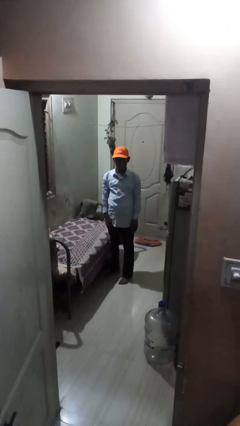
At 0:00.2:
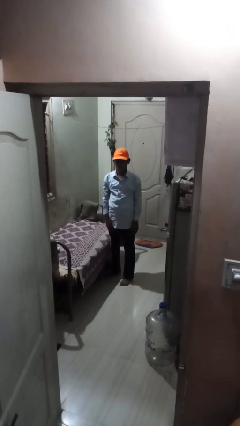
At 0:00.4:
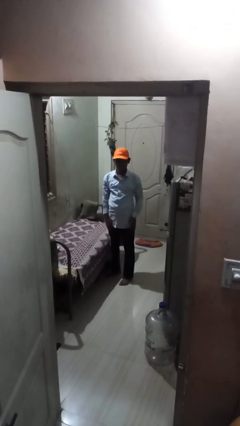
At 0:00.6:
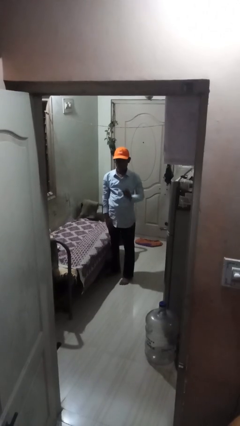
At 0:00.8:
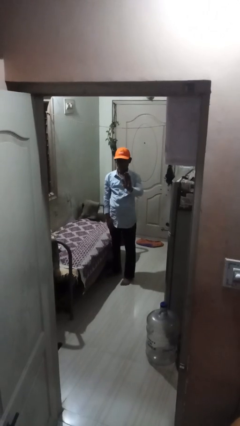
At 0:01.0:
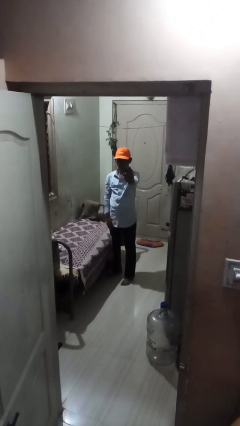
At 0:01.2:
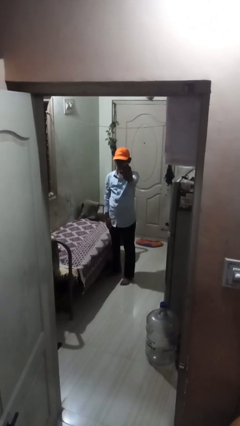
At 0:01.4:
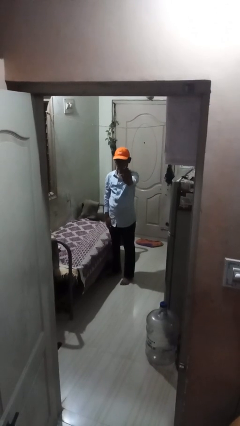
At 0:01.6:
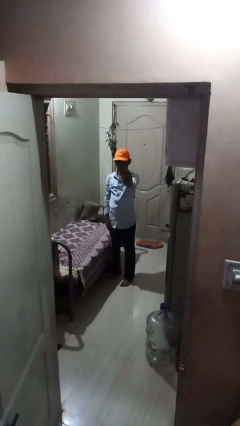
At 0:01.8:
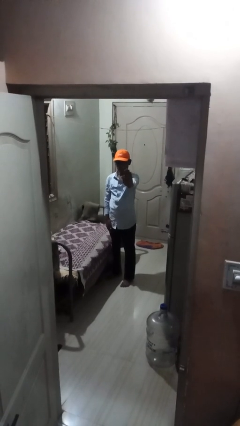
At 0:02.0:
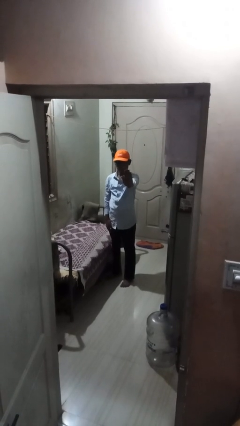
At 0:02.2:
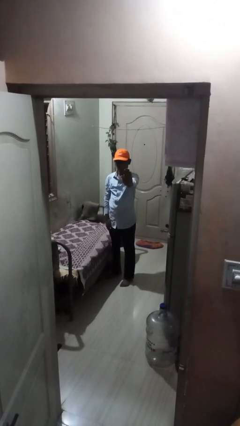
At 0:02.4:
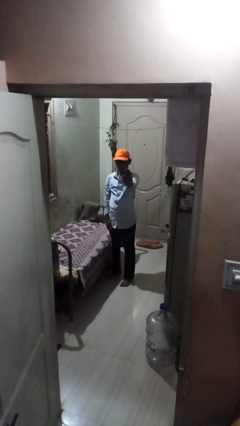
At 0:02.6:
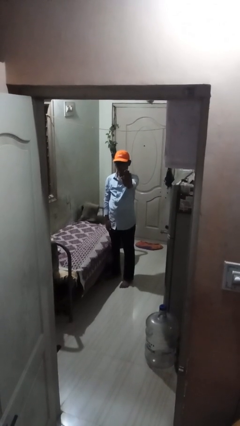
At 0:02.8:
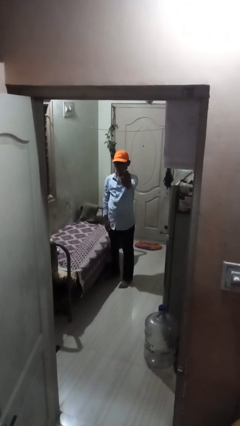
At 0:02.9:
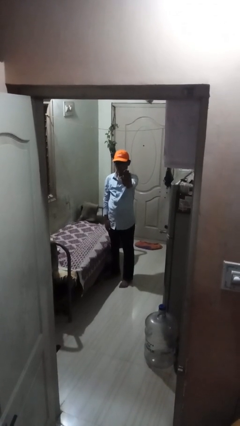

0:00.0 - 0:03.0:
person gestures stop

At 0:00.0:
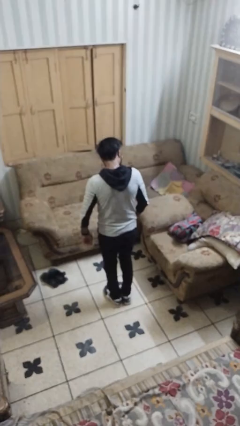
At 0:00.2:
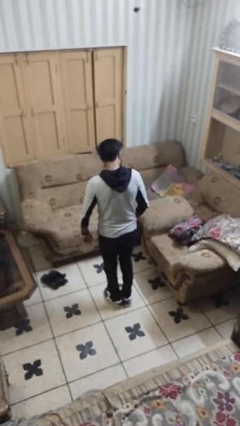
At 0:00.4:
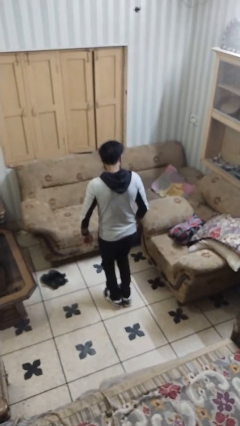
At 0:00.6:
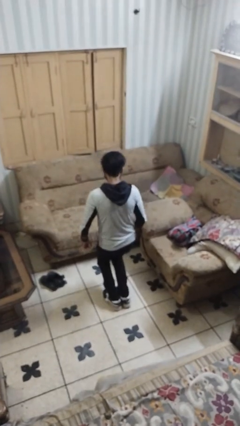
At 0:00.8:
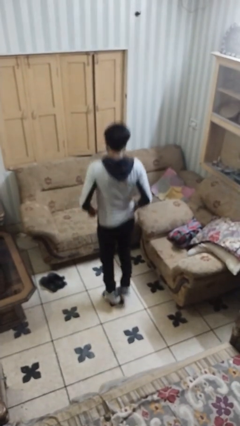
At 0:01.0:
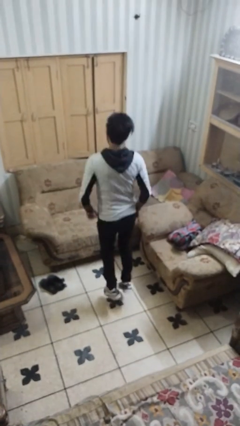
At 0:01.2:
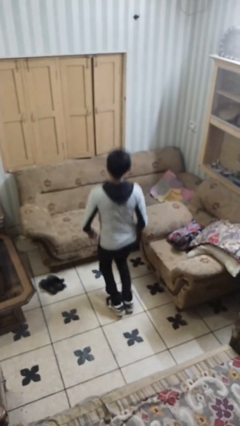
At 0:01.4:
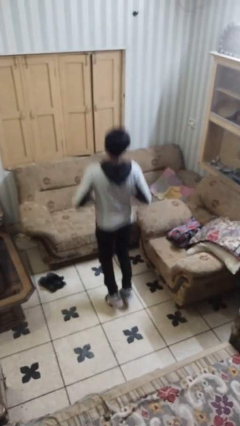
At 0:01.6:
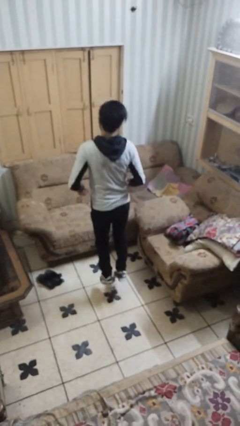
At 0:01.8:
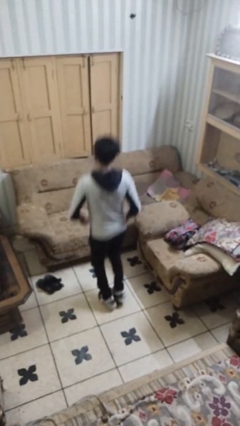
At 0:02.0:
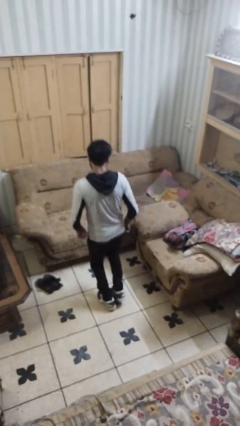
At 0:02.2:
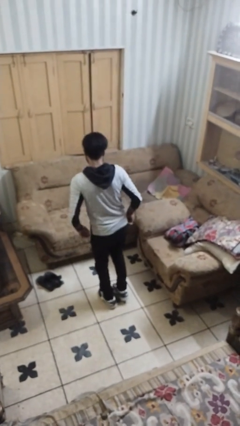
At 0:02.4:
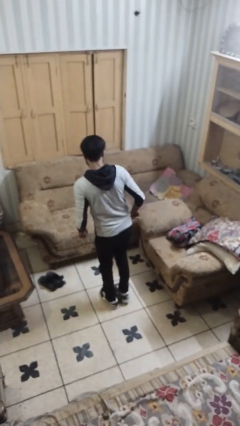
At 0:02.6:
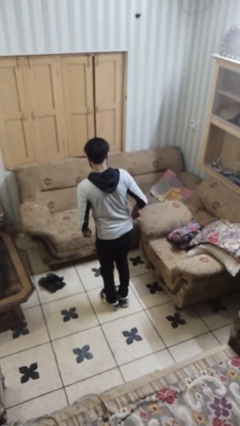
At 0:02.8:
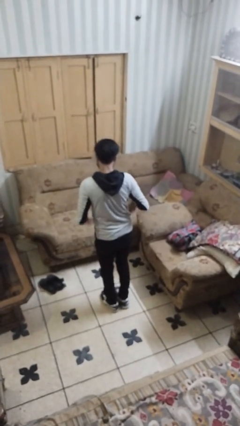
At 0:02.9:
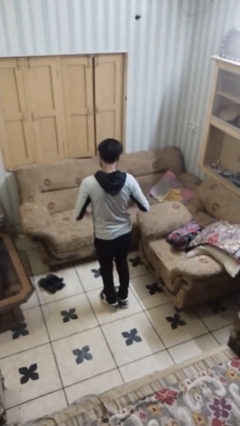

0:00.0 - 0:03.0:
person jumps

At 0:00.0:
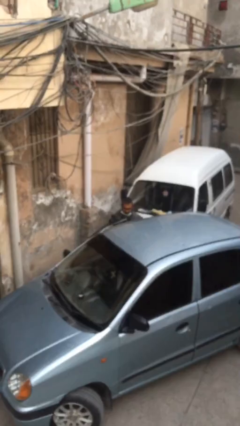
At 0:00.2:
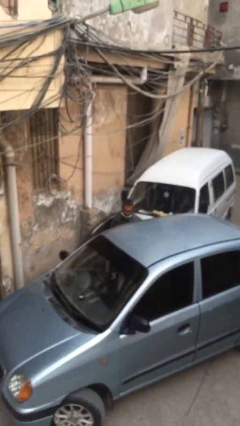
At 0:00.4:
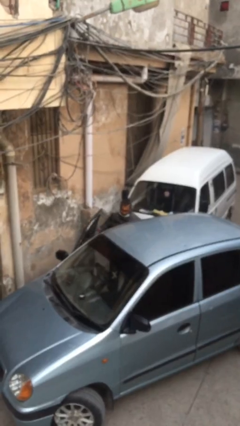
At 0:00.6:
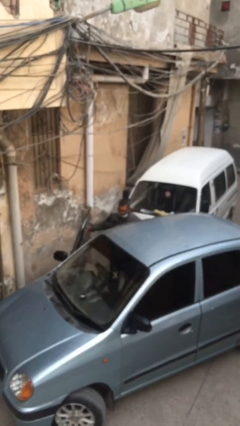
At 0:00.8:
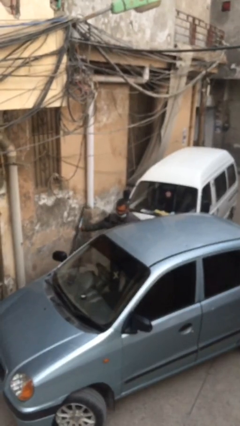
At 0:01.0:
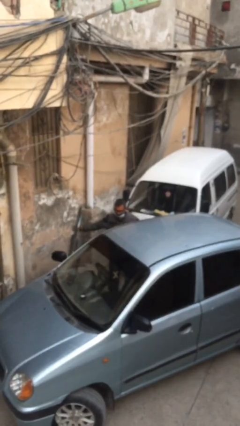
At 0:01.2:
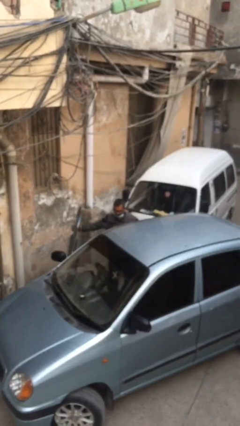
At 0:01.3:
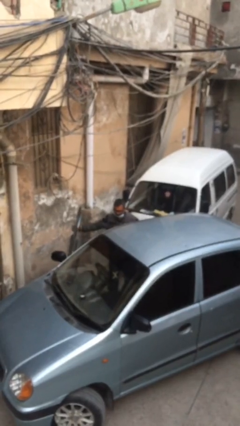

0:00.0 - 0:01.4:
person opens car door

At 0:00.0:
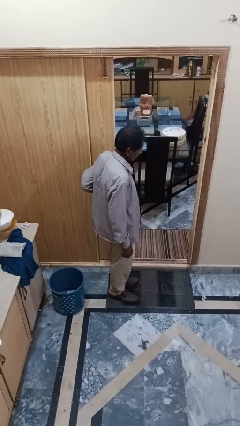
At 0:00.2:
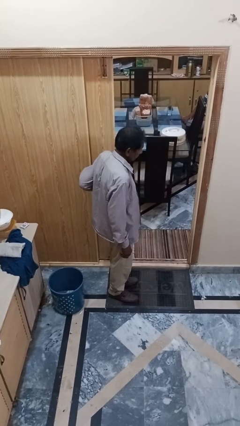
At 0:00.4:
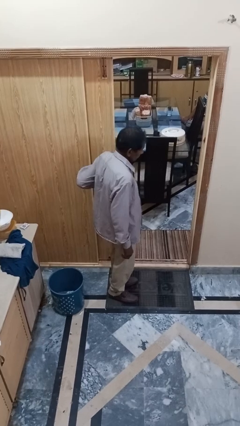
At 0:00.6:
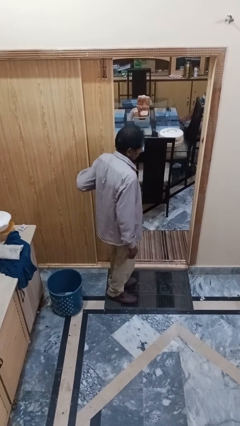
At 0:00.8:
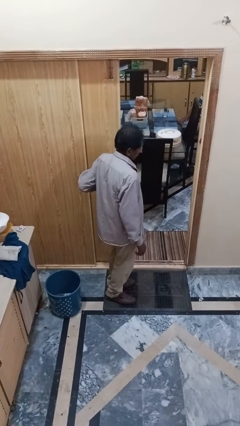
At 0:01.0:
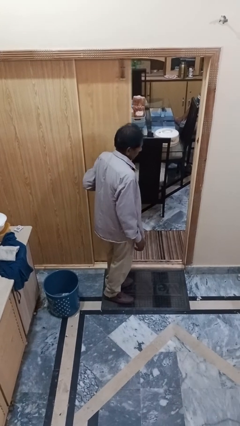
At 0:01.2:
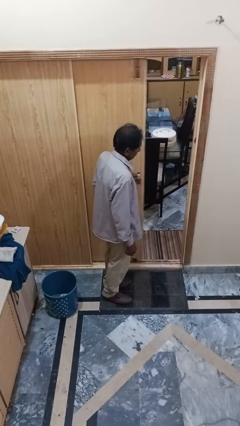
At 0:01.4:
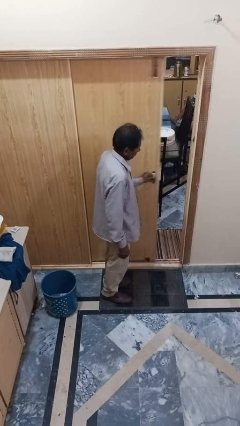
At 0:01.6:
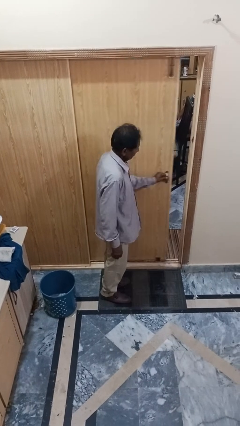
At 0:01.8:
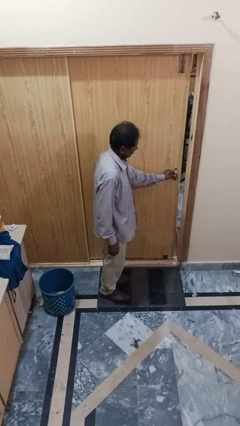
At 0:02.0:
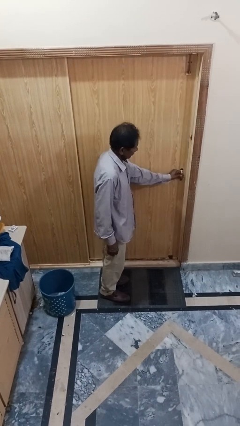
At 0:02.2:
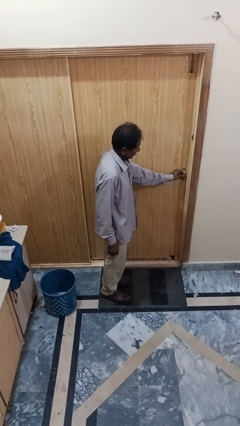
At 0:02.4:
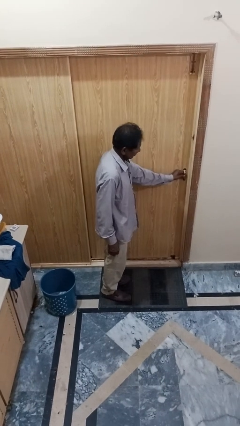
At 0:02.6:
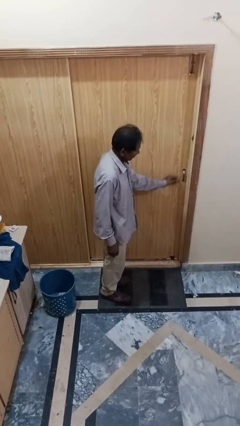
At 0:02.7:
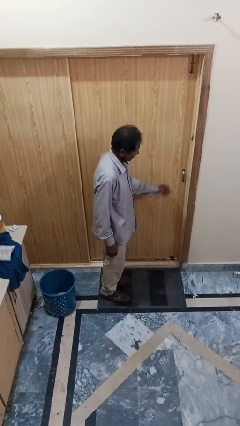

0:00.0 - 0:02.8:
person closes sliding door

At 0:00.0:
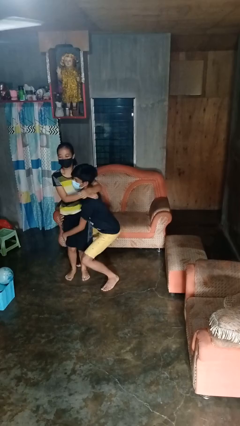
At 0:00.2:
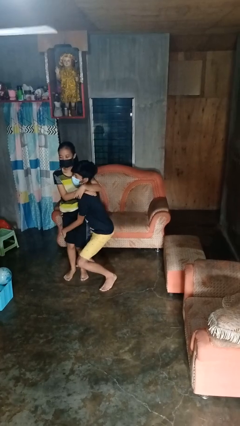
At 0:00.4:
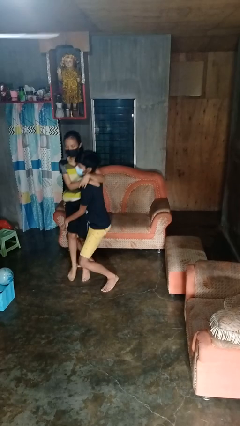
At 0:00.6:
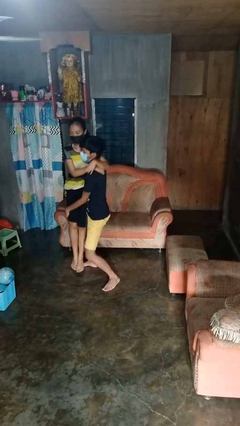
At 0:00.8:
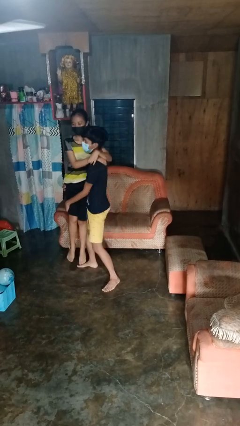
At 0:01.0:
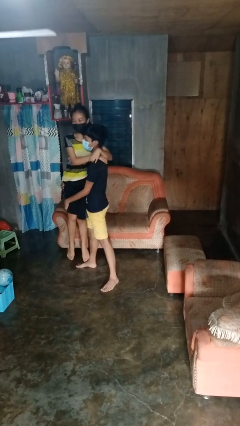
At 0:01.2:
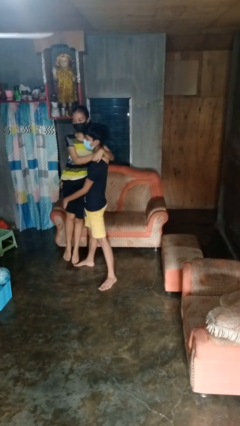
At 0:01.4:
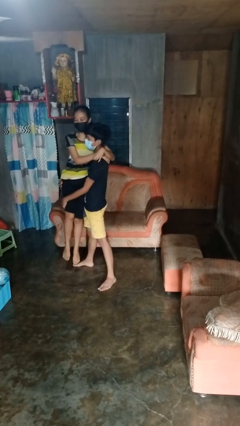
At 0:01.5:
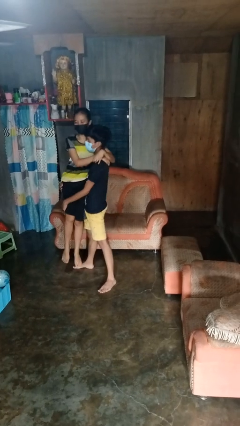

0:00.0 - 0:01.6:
person picks up person

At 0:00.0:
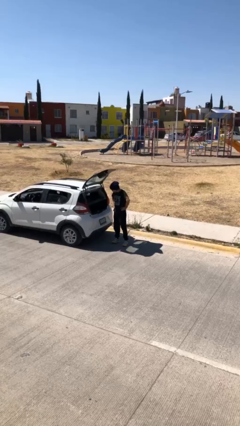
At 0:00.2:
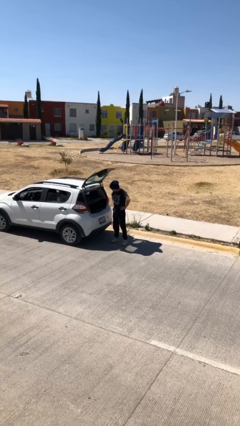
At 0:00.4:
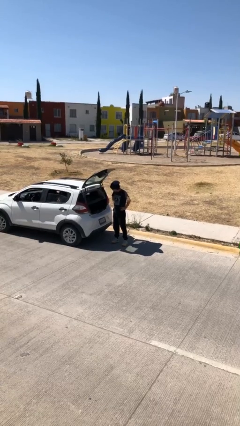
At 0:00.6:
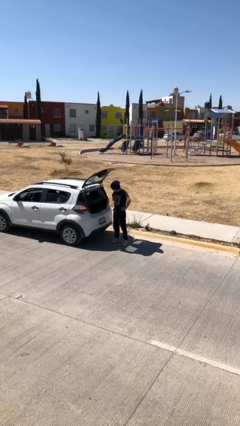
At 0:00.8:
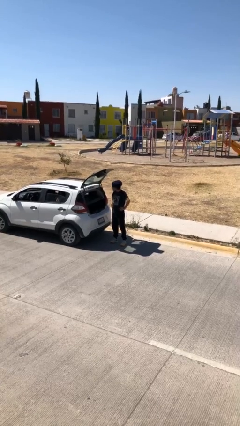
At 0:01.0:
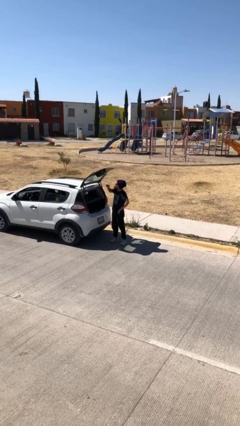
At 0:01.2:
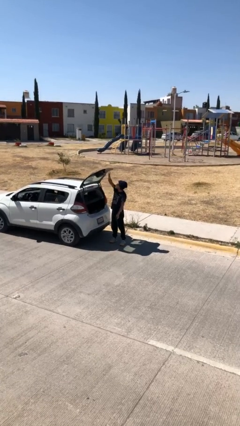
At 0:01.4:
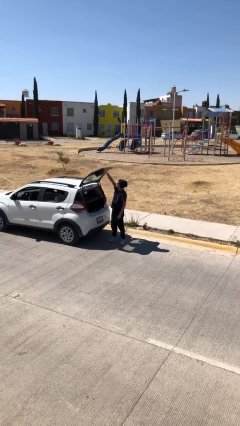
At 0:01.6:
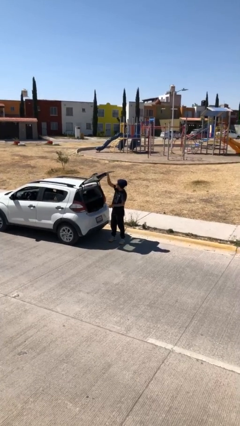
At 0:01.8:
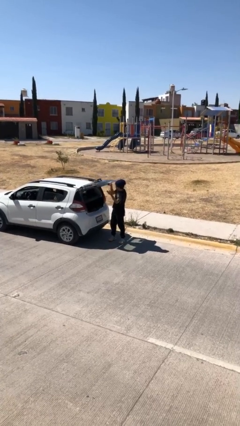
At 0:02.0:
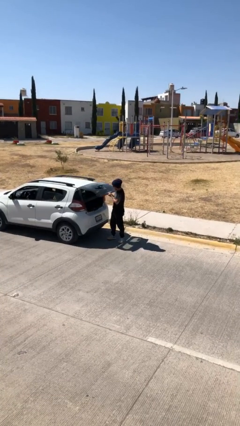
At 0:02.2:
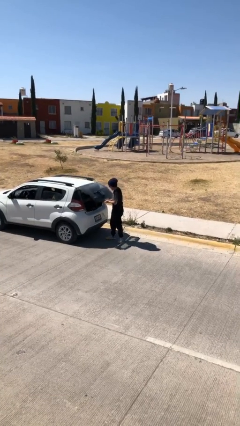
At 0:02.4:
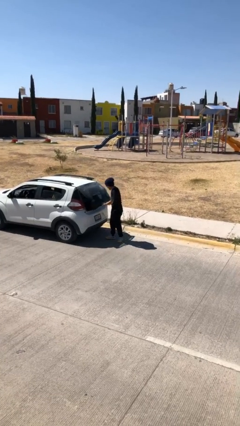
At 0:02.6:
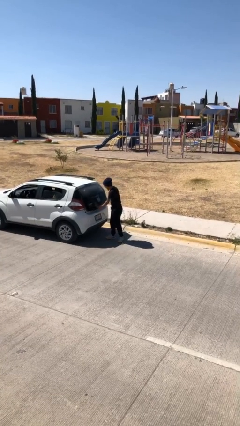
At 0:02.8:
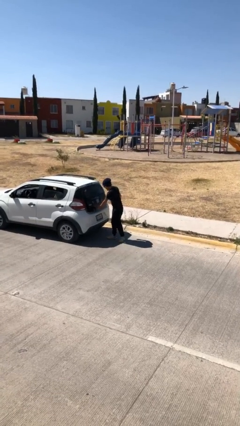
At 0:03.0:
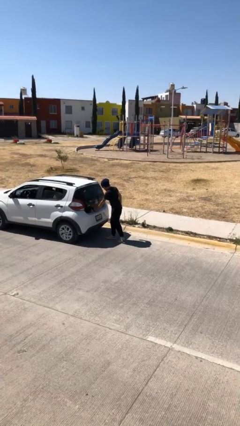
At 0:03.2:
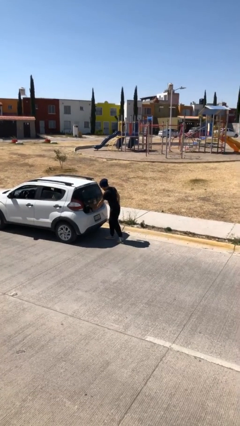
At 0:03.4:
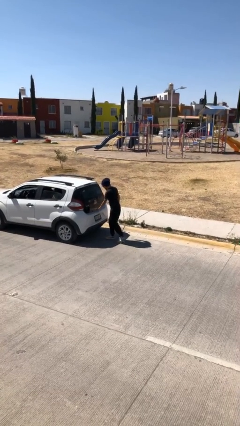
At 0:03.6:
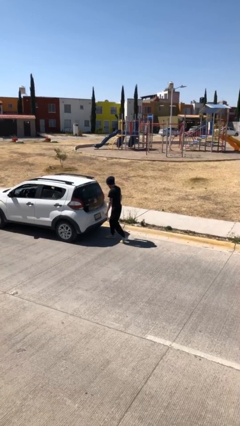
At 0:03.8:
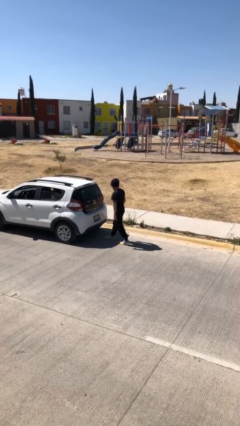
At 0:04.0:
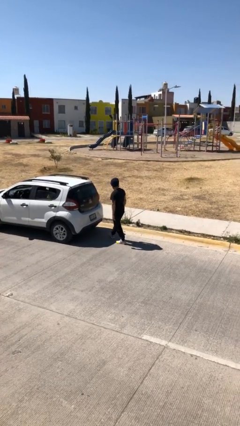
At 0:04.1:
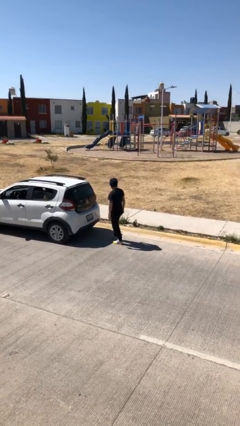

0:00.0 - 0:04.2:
person closes car trunk

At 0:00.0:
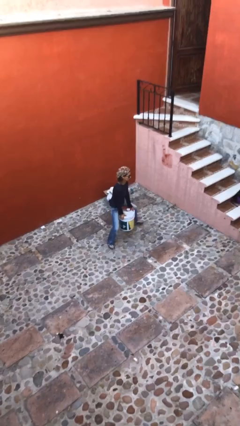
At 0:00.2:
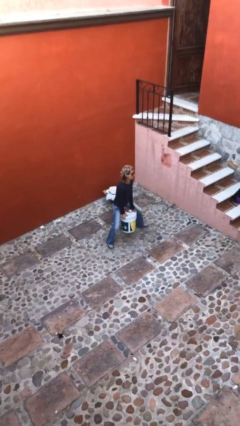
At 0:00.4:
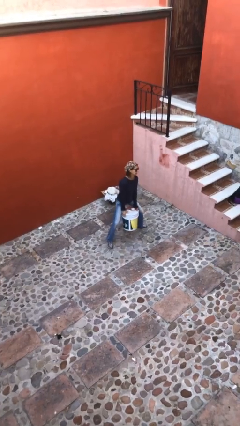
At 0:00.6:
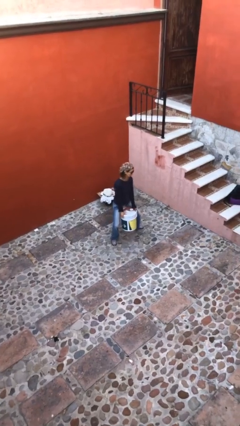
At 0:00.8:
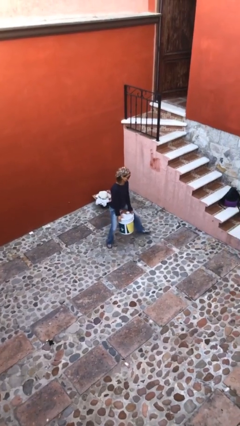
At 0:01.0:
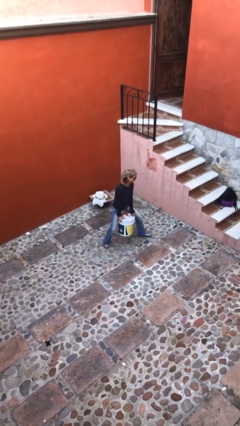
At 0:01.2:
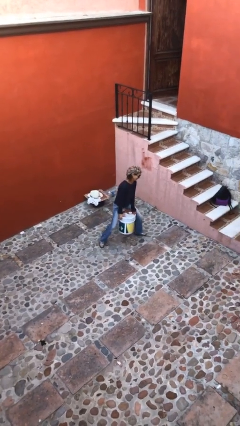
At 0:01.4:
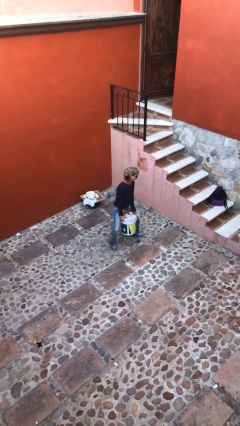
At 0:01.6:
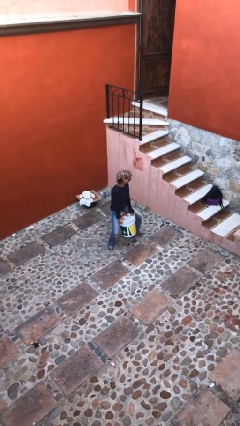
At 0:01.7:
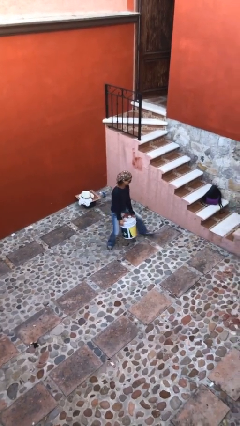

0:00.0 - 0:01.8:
person carries heavy object
